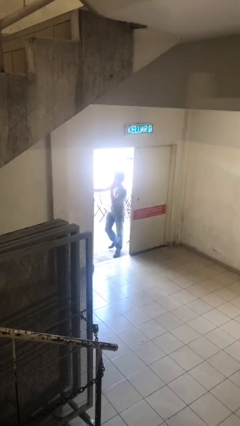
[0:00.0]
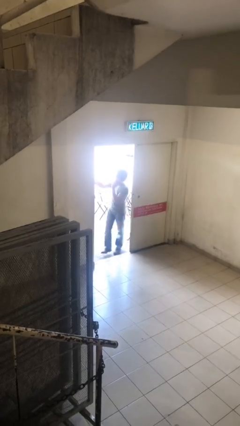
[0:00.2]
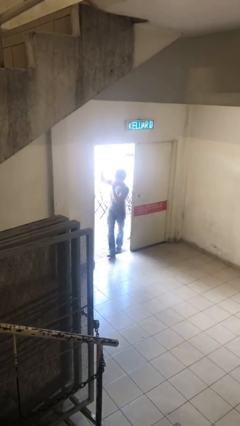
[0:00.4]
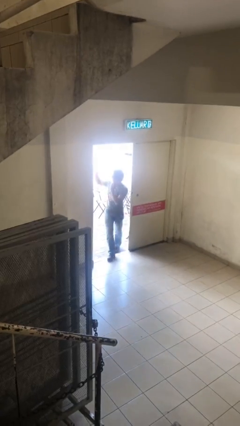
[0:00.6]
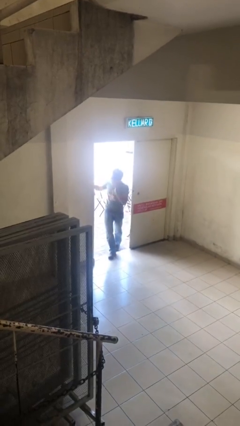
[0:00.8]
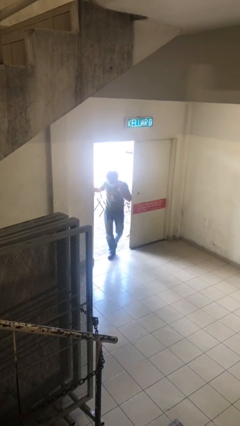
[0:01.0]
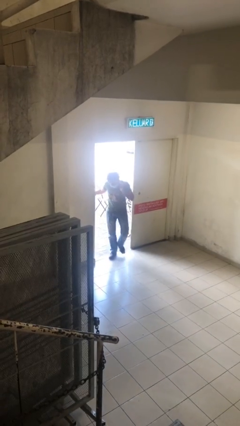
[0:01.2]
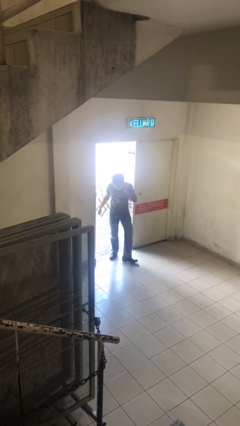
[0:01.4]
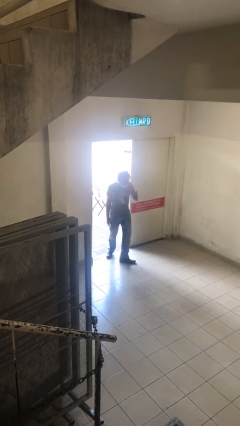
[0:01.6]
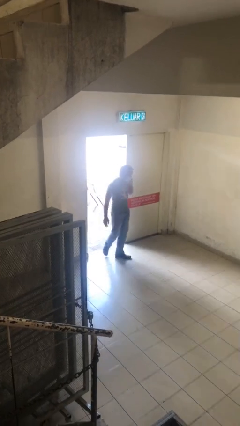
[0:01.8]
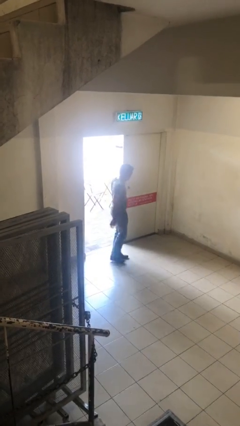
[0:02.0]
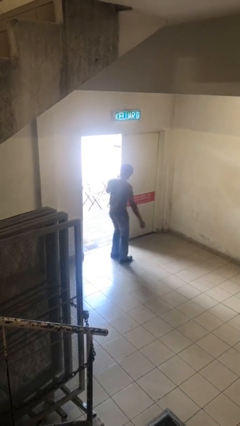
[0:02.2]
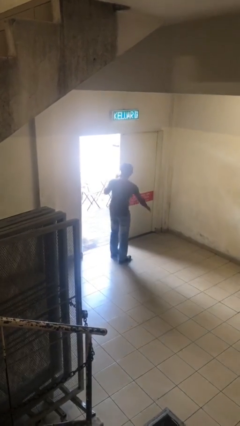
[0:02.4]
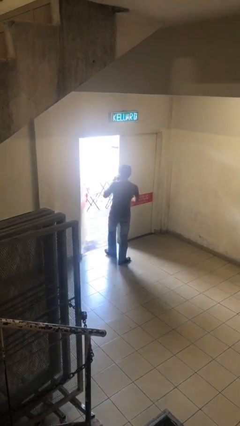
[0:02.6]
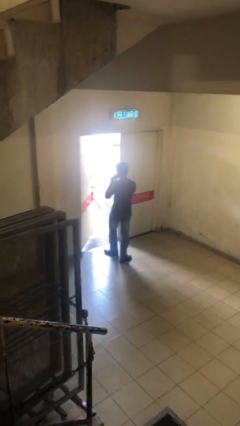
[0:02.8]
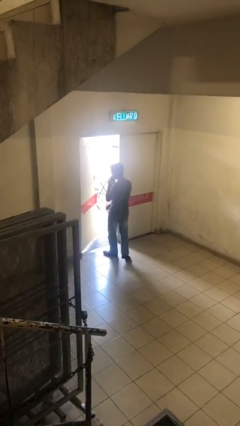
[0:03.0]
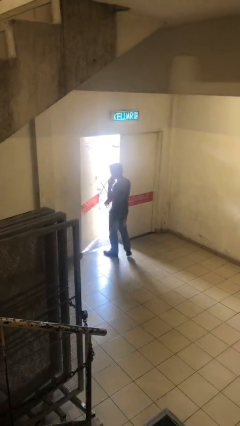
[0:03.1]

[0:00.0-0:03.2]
person enters scene through structure

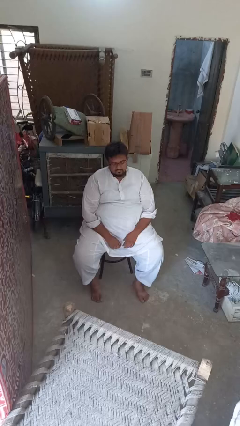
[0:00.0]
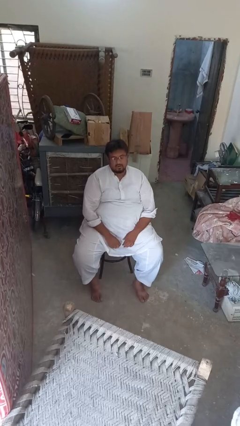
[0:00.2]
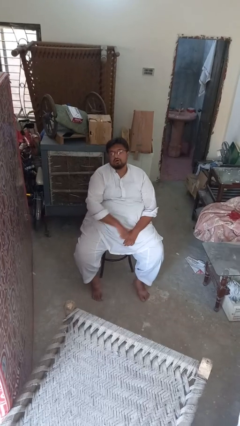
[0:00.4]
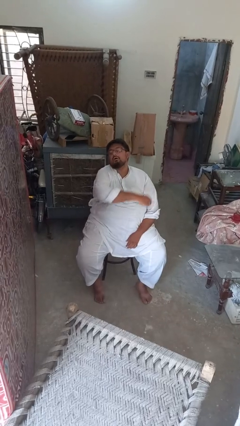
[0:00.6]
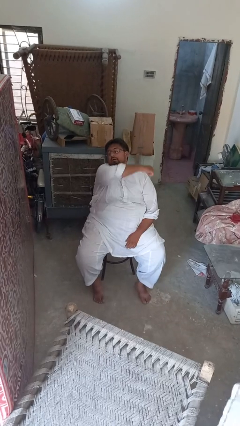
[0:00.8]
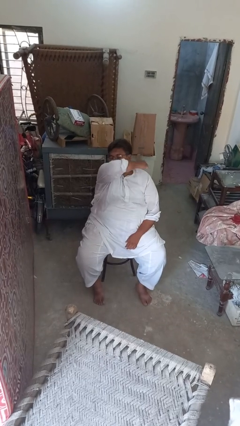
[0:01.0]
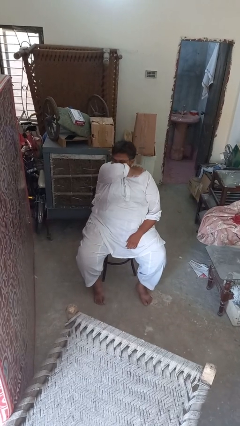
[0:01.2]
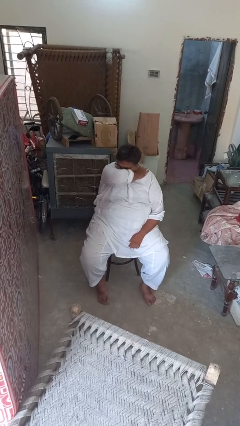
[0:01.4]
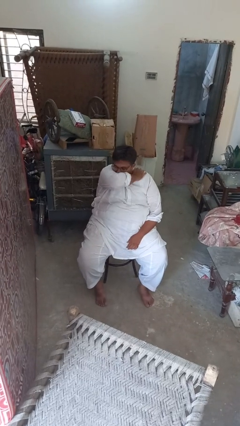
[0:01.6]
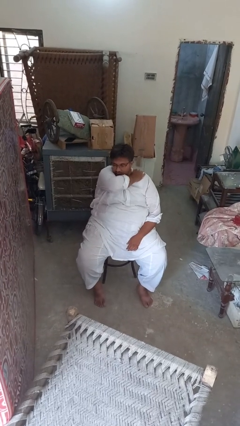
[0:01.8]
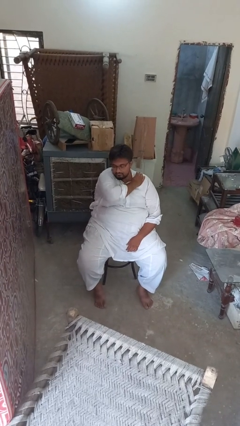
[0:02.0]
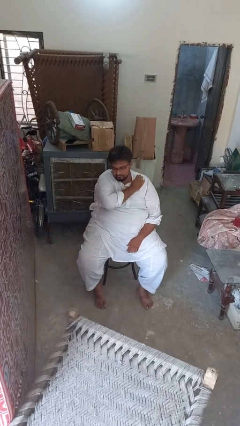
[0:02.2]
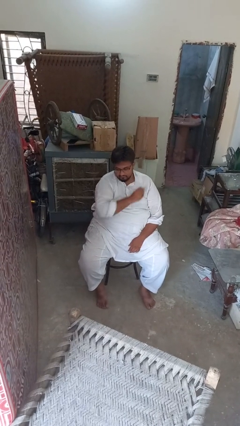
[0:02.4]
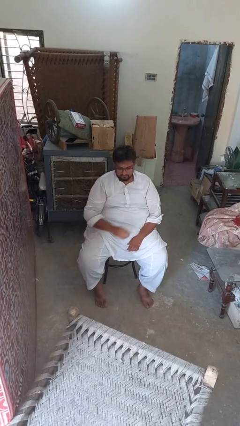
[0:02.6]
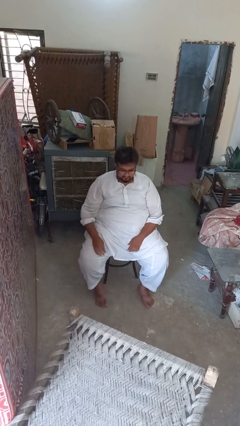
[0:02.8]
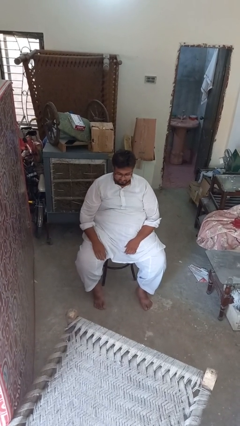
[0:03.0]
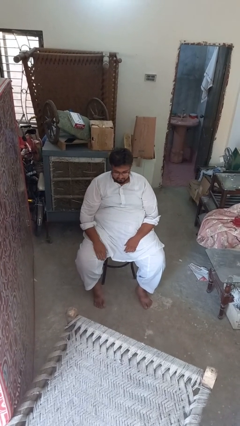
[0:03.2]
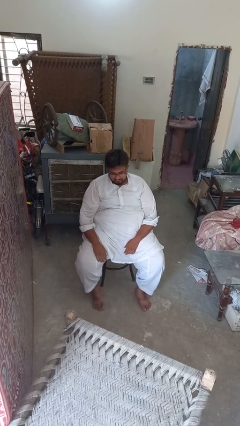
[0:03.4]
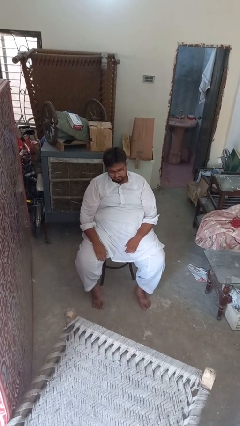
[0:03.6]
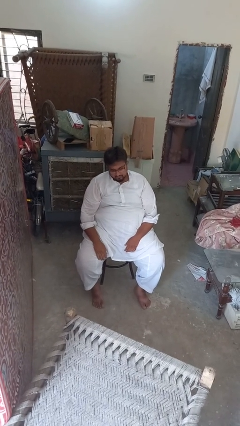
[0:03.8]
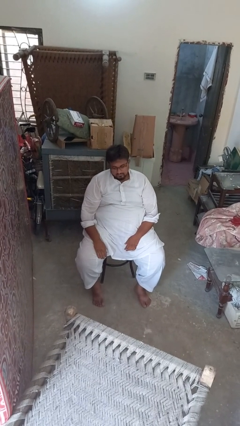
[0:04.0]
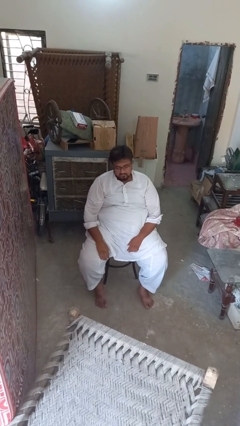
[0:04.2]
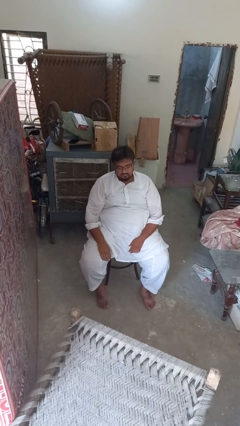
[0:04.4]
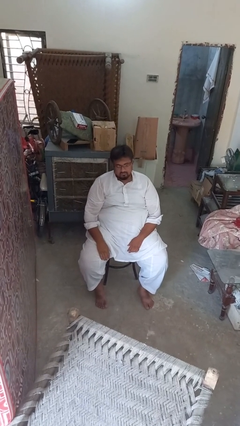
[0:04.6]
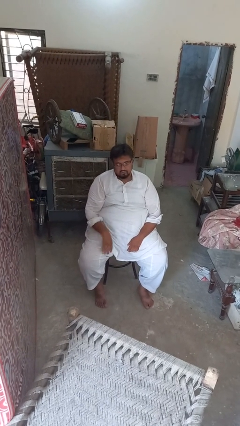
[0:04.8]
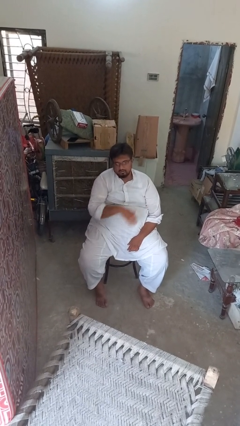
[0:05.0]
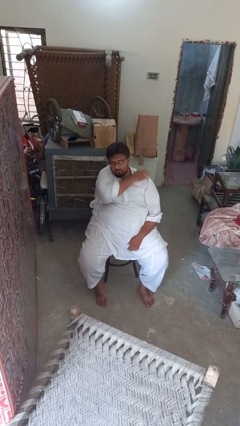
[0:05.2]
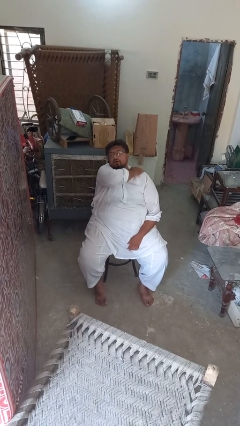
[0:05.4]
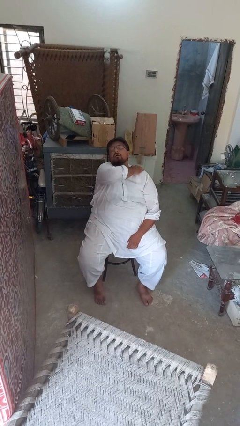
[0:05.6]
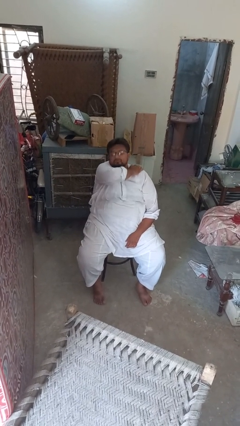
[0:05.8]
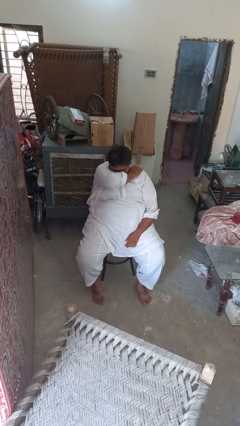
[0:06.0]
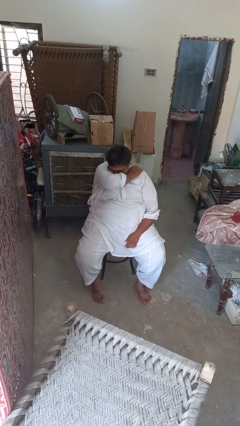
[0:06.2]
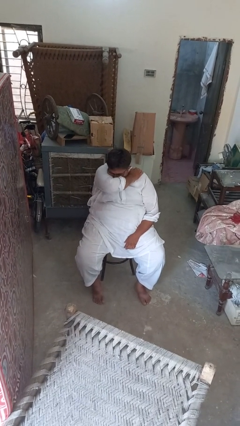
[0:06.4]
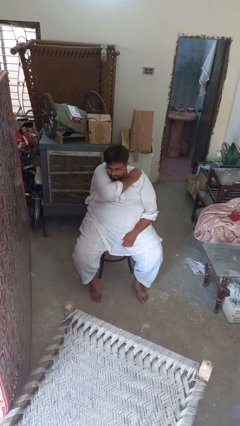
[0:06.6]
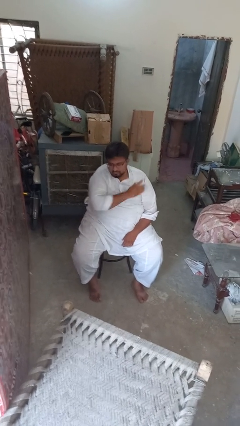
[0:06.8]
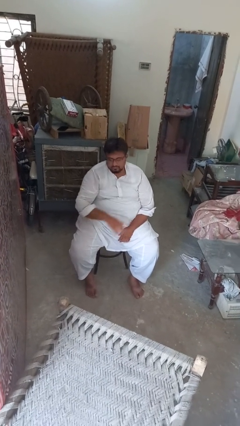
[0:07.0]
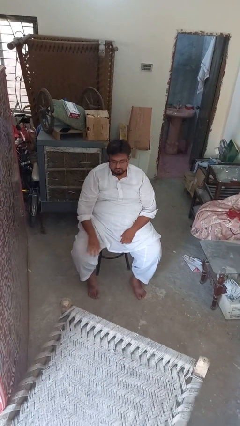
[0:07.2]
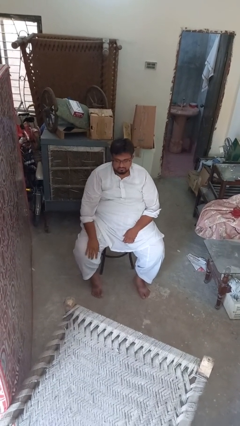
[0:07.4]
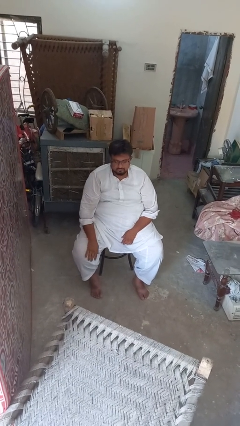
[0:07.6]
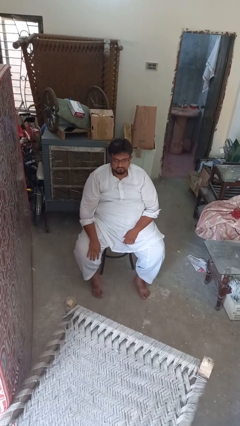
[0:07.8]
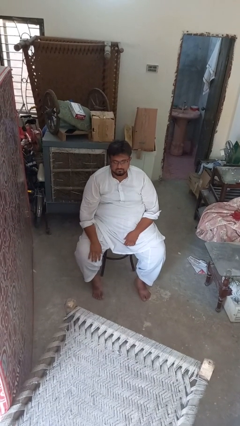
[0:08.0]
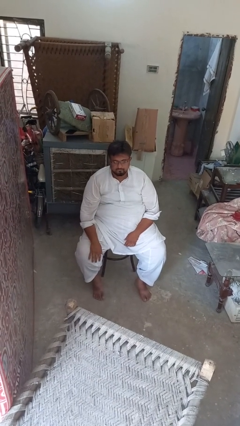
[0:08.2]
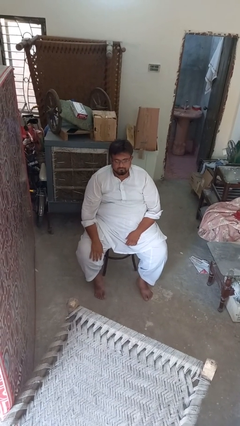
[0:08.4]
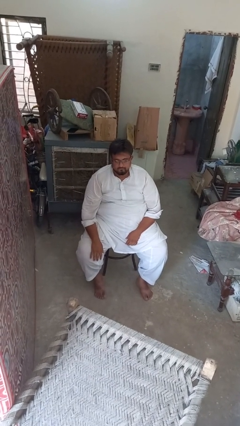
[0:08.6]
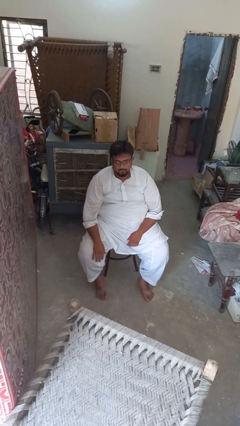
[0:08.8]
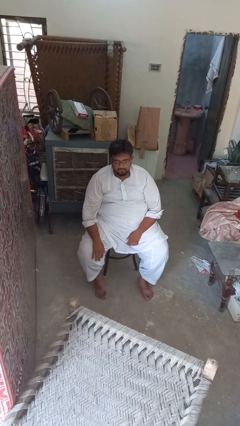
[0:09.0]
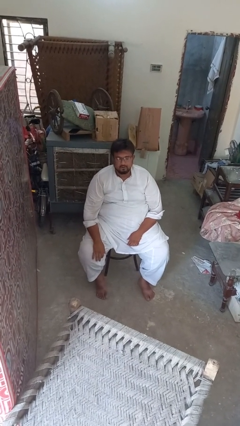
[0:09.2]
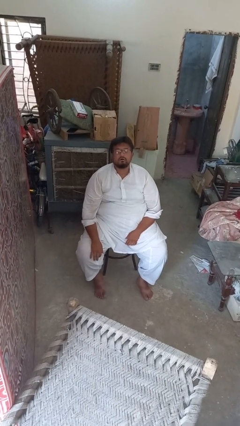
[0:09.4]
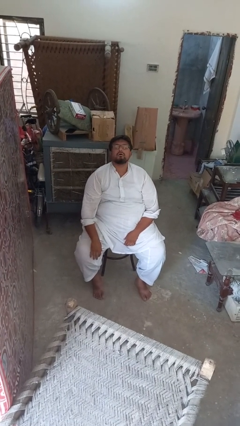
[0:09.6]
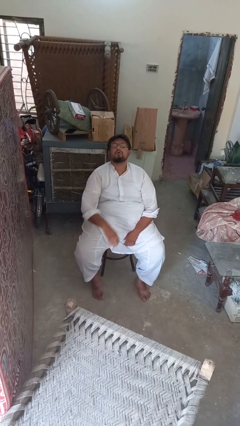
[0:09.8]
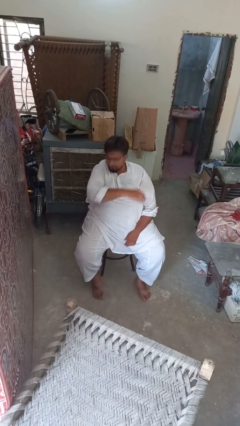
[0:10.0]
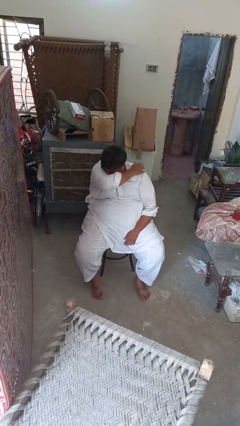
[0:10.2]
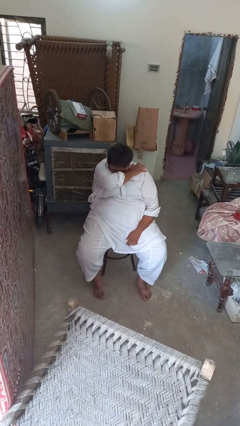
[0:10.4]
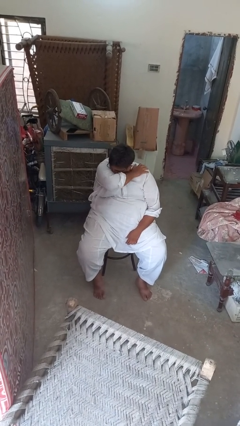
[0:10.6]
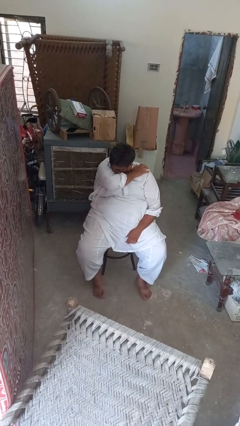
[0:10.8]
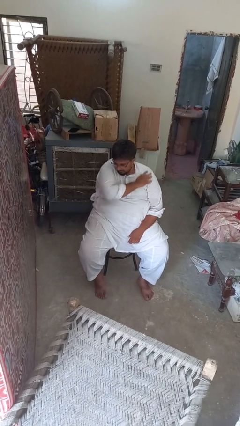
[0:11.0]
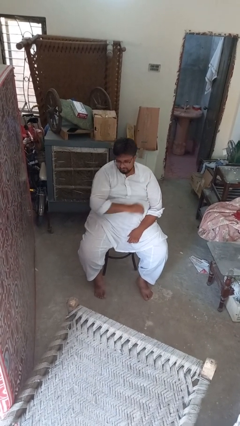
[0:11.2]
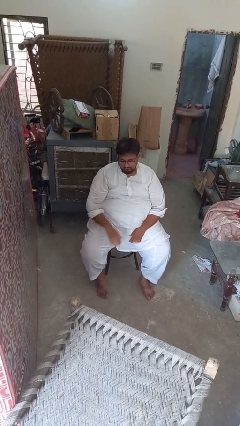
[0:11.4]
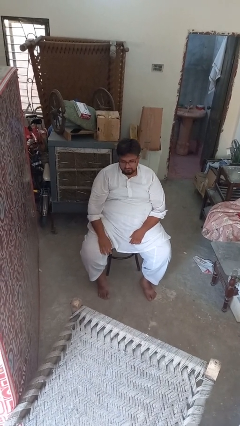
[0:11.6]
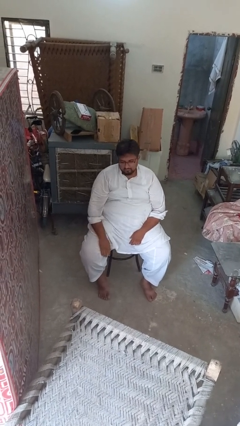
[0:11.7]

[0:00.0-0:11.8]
person sneezes into arm

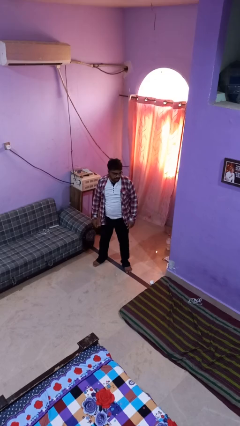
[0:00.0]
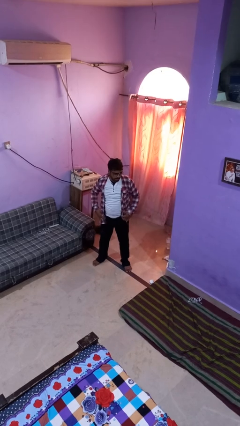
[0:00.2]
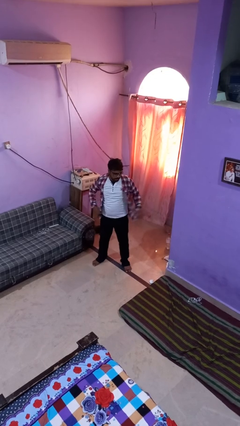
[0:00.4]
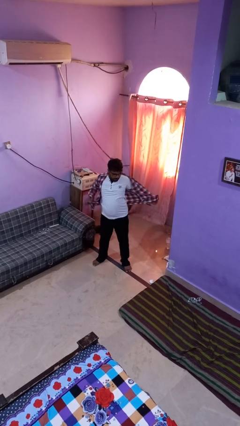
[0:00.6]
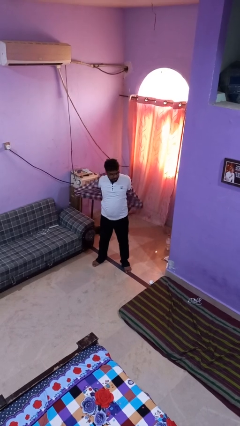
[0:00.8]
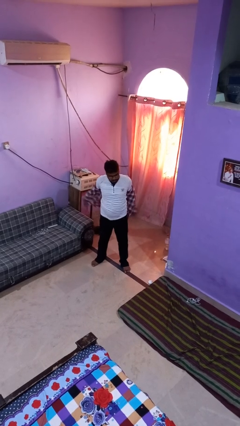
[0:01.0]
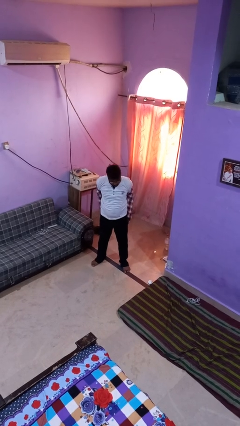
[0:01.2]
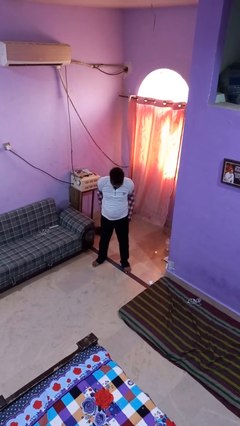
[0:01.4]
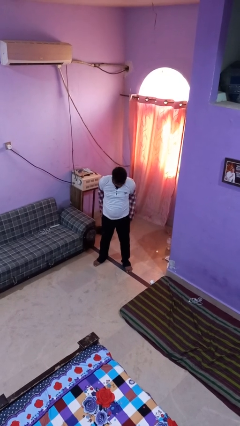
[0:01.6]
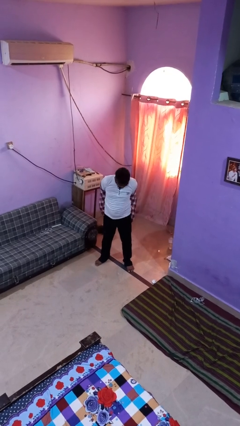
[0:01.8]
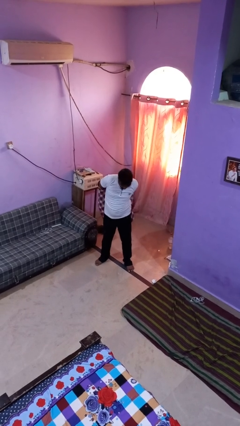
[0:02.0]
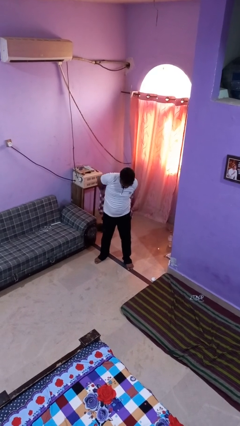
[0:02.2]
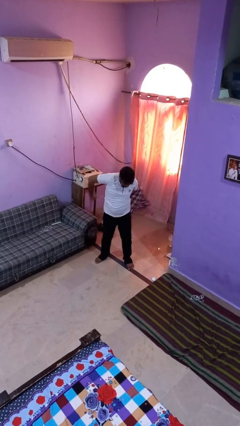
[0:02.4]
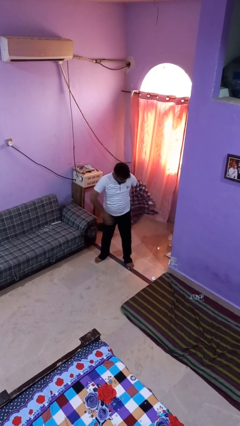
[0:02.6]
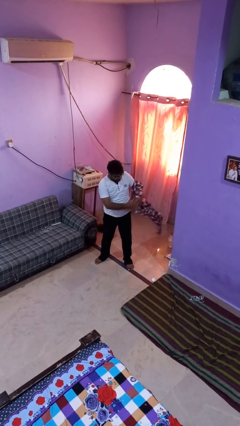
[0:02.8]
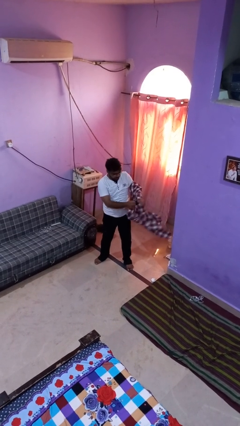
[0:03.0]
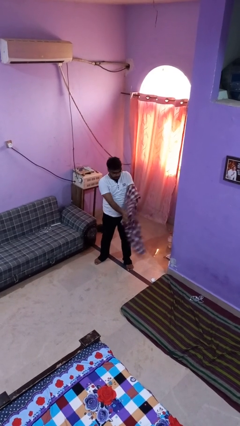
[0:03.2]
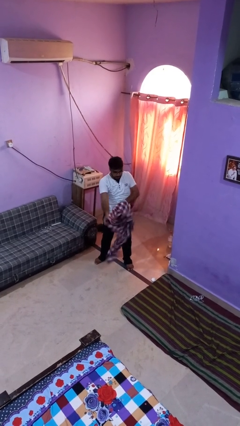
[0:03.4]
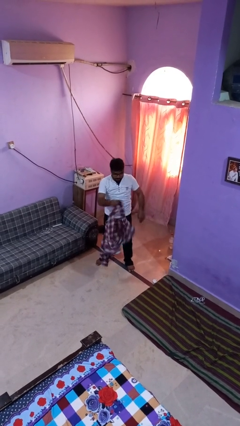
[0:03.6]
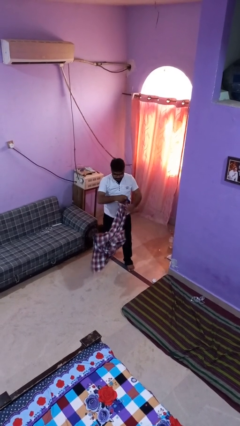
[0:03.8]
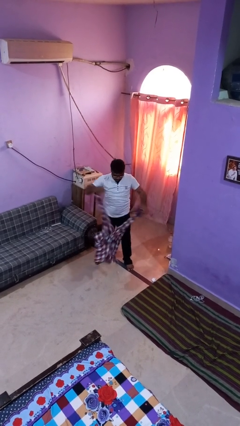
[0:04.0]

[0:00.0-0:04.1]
person takes off shirt
